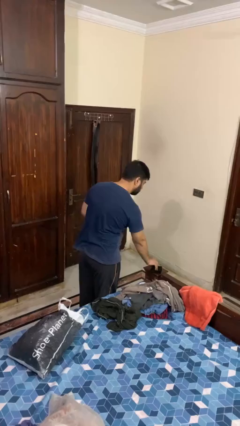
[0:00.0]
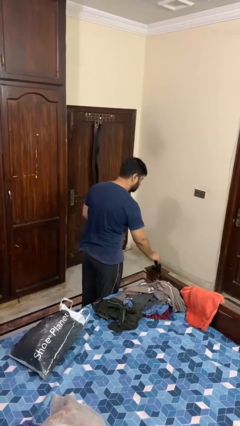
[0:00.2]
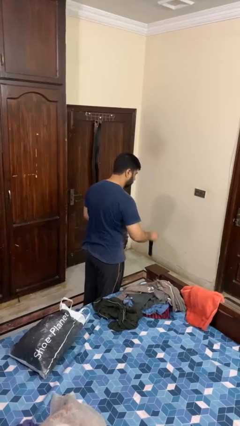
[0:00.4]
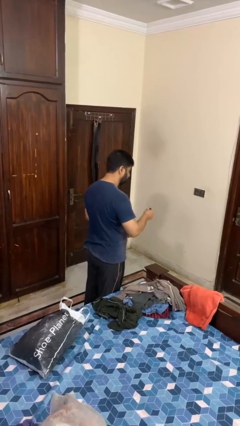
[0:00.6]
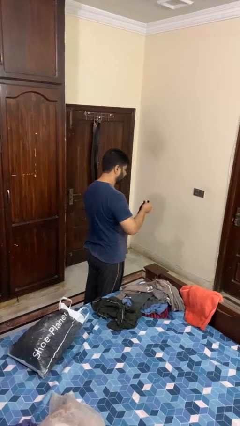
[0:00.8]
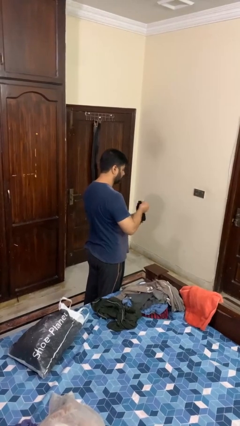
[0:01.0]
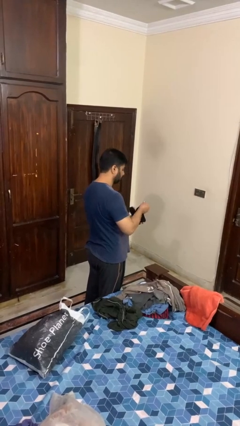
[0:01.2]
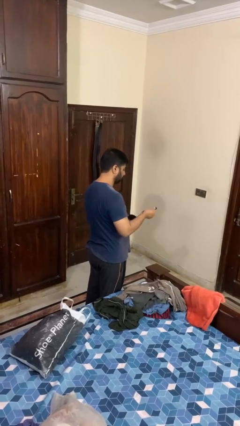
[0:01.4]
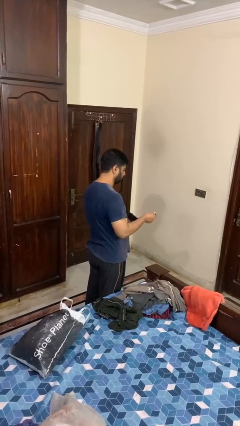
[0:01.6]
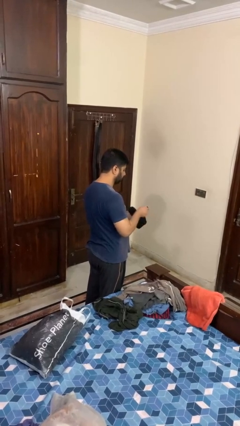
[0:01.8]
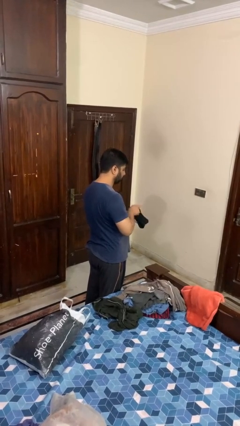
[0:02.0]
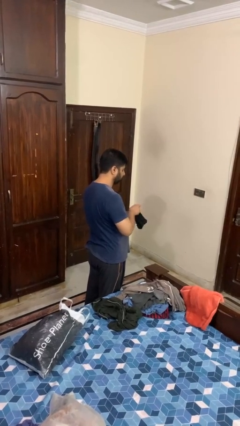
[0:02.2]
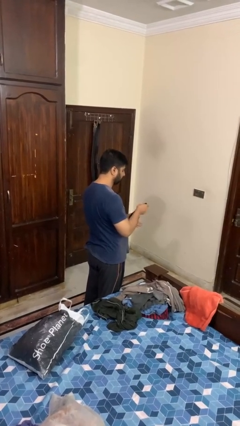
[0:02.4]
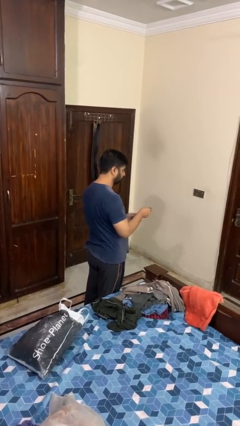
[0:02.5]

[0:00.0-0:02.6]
person folds socks

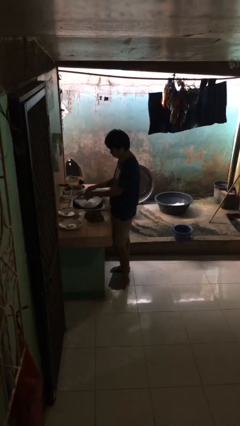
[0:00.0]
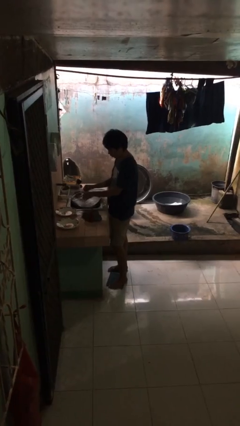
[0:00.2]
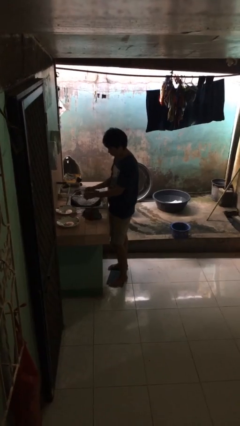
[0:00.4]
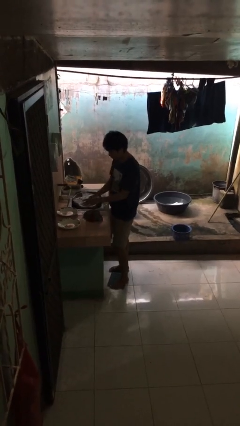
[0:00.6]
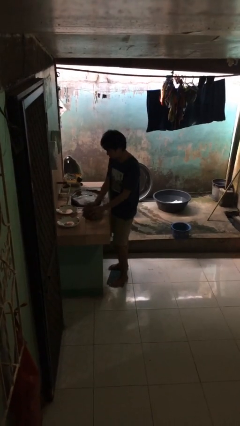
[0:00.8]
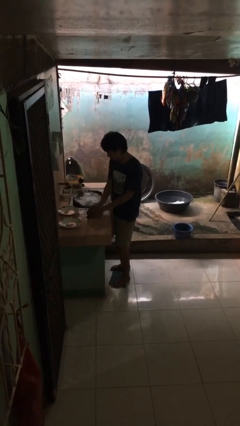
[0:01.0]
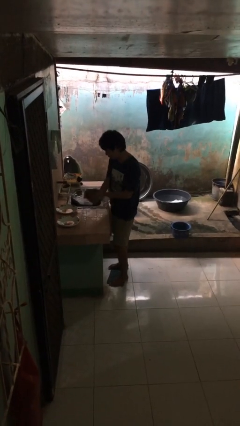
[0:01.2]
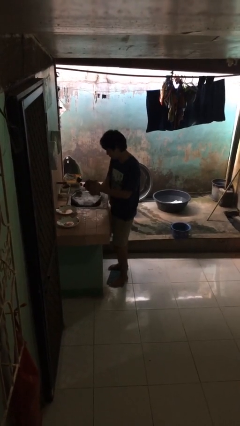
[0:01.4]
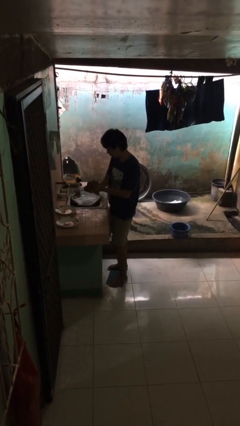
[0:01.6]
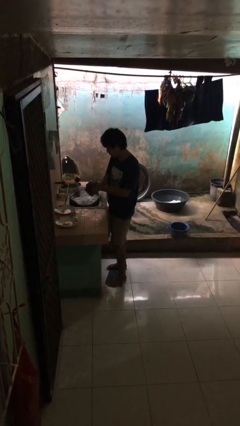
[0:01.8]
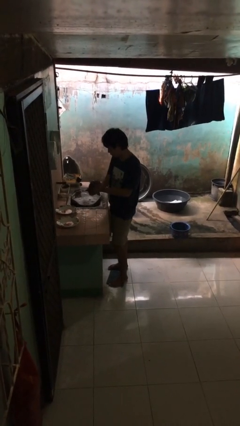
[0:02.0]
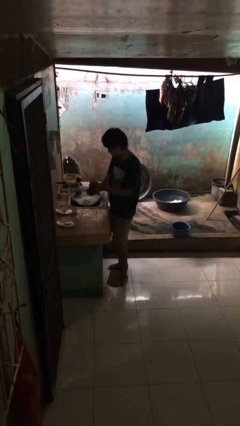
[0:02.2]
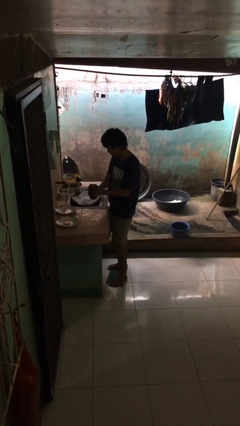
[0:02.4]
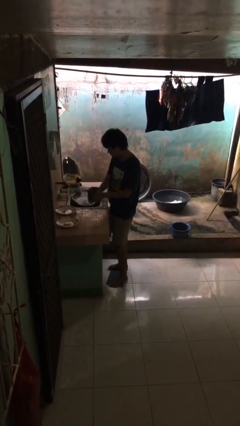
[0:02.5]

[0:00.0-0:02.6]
person dries hands with towel

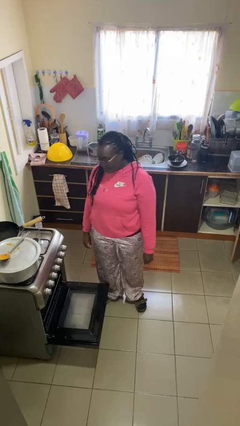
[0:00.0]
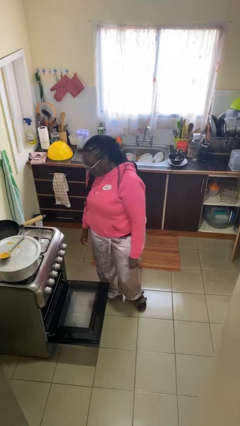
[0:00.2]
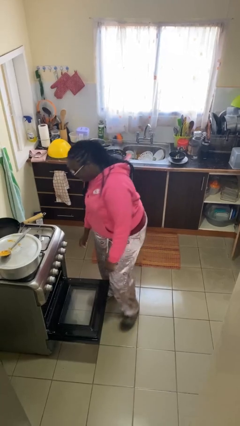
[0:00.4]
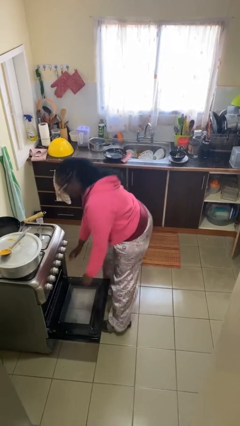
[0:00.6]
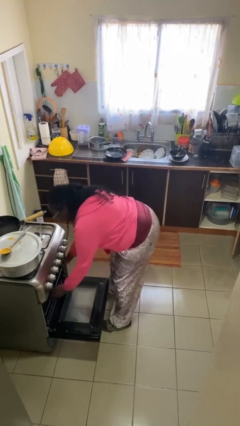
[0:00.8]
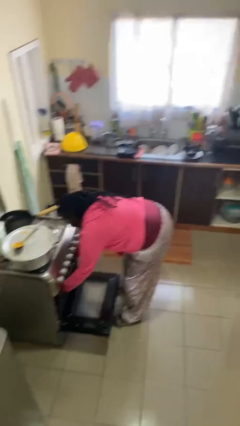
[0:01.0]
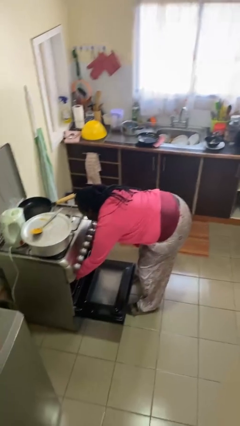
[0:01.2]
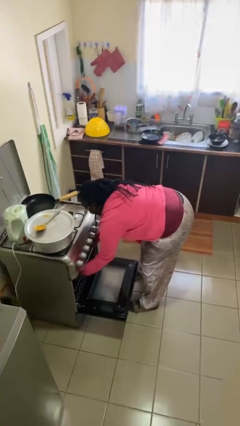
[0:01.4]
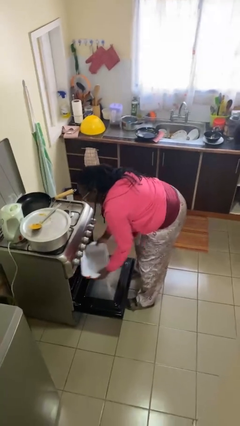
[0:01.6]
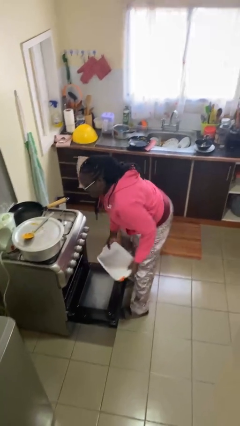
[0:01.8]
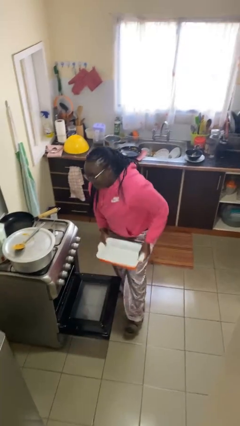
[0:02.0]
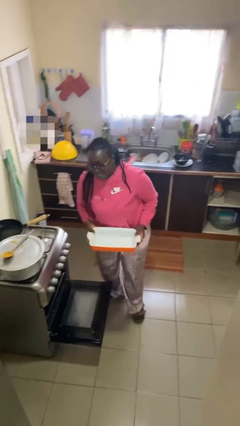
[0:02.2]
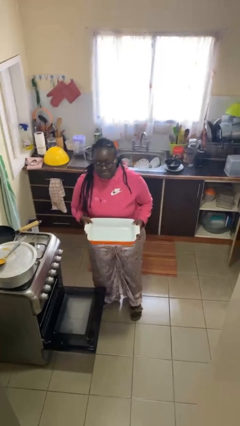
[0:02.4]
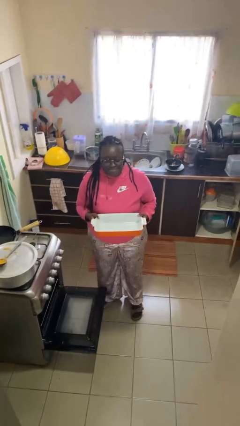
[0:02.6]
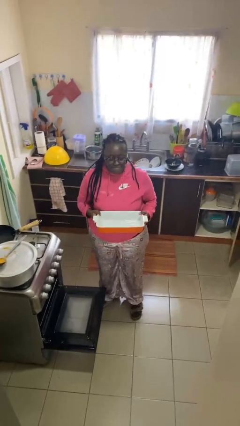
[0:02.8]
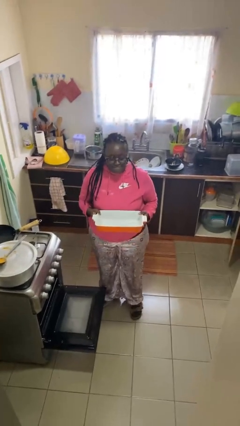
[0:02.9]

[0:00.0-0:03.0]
person takes object from oven

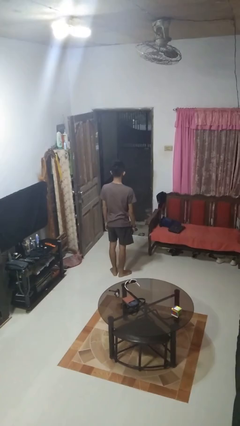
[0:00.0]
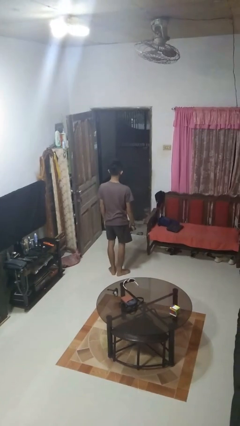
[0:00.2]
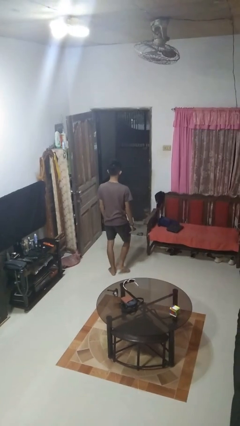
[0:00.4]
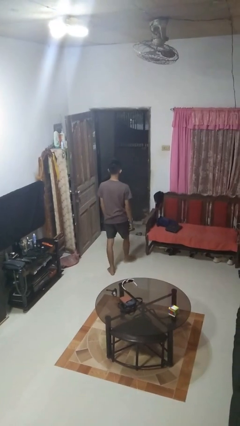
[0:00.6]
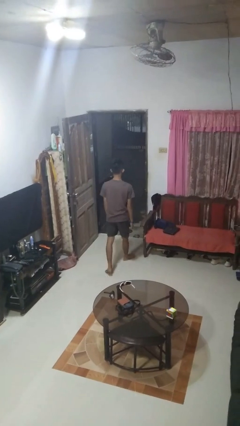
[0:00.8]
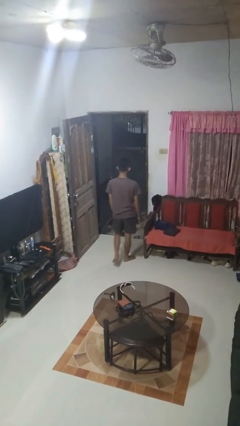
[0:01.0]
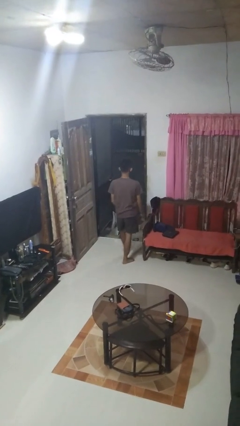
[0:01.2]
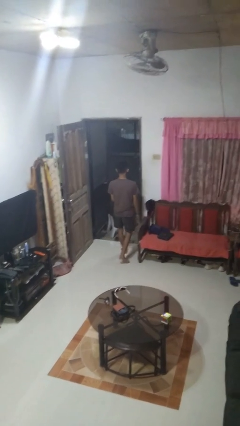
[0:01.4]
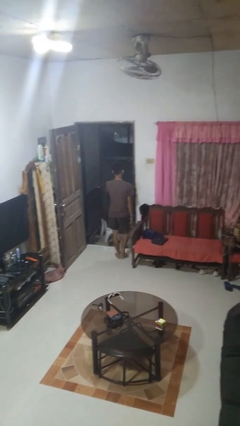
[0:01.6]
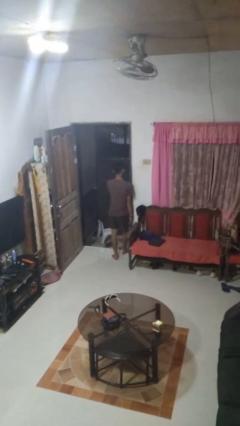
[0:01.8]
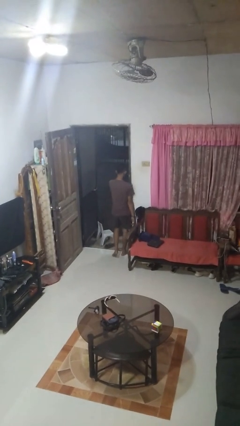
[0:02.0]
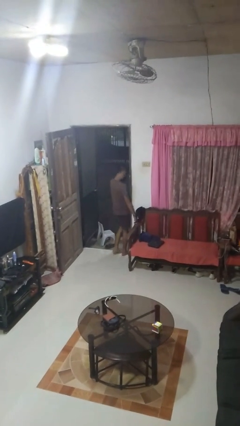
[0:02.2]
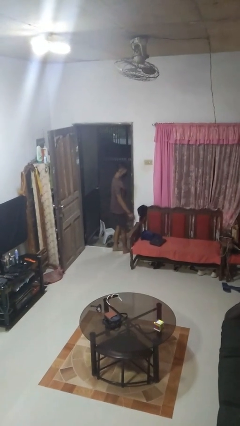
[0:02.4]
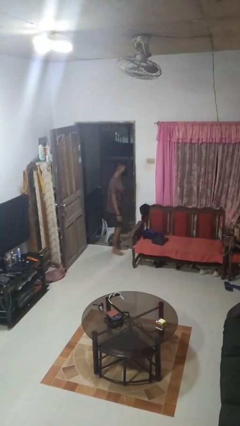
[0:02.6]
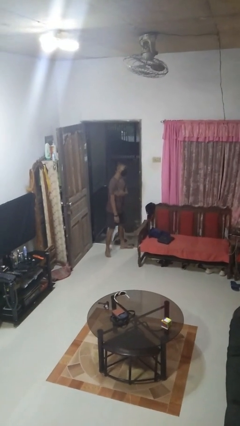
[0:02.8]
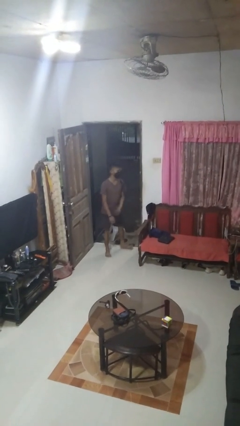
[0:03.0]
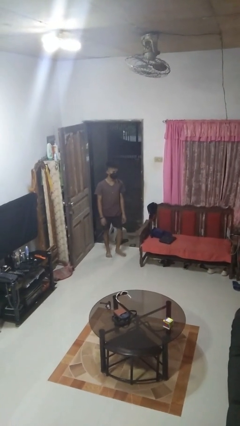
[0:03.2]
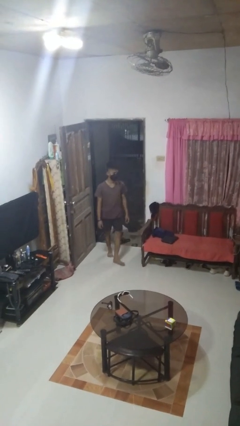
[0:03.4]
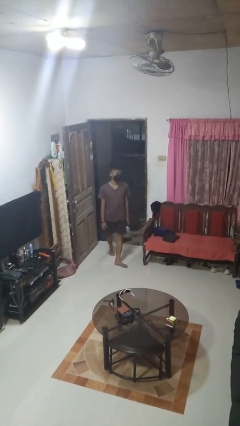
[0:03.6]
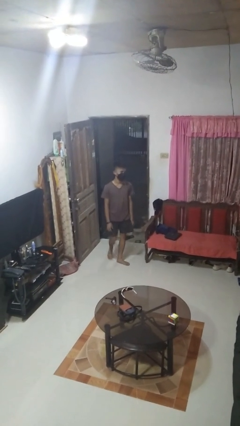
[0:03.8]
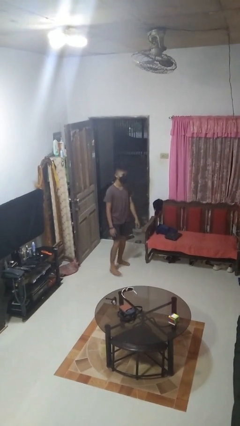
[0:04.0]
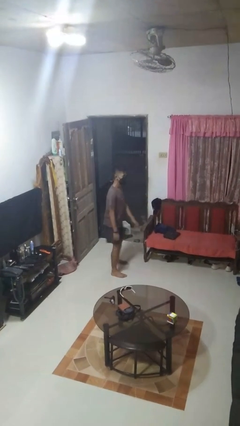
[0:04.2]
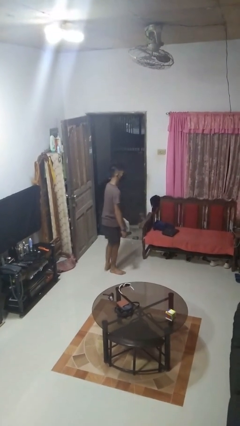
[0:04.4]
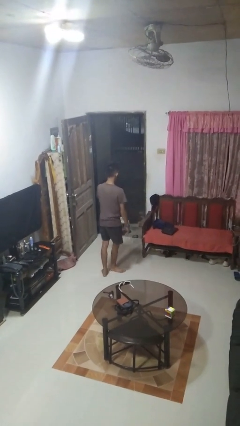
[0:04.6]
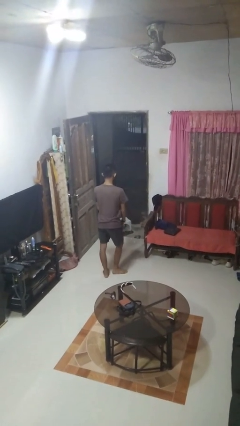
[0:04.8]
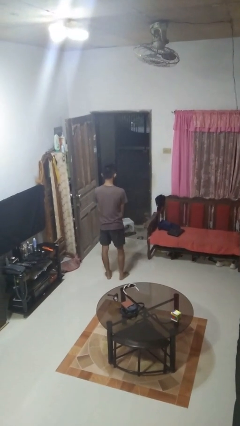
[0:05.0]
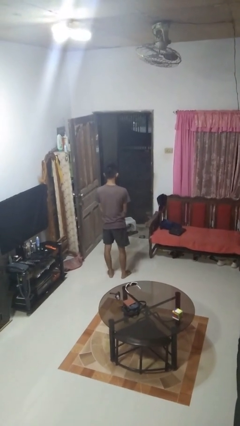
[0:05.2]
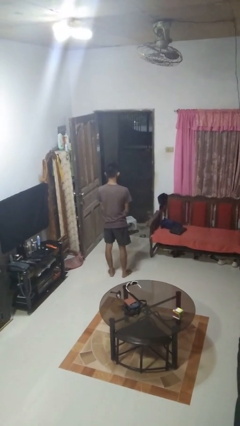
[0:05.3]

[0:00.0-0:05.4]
person bumps into wall

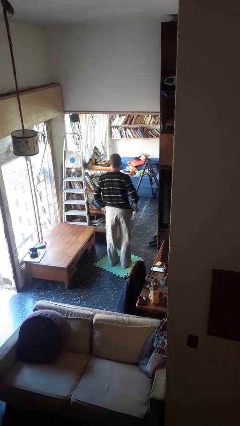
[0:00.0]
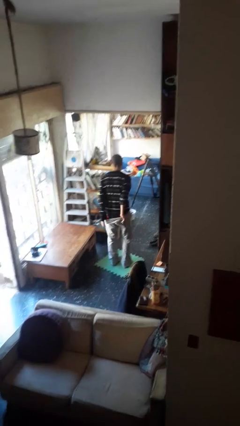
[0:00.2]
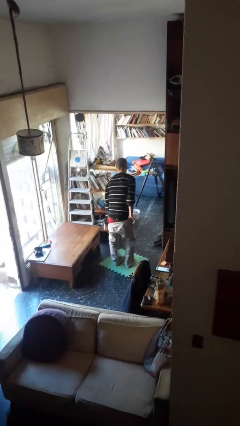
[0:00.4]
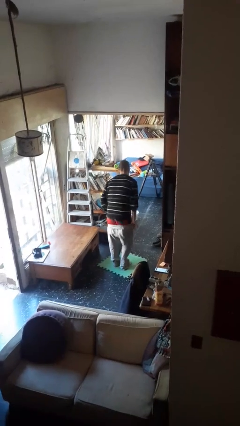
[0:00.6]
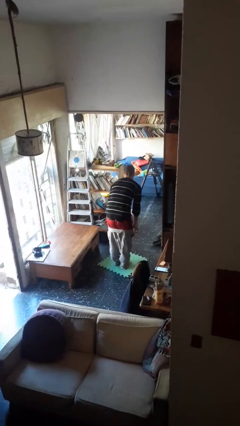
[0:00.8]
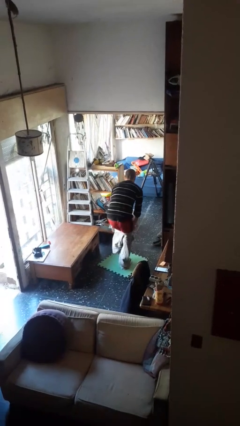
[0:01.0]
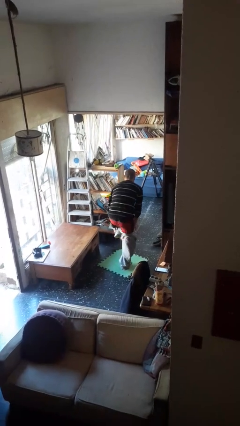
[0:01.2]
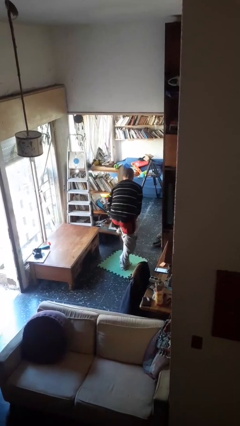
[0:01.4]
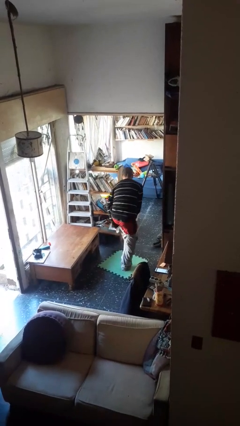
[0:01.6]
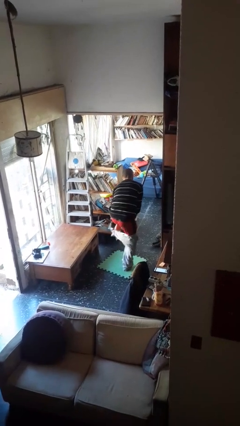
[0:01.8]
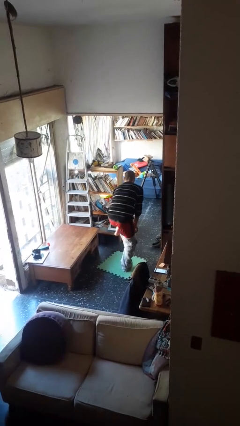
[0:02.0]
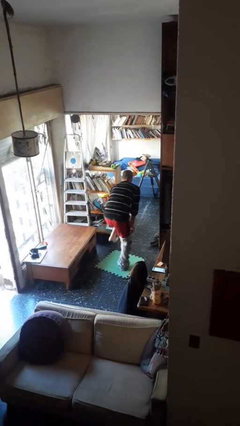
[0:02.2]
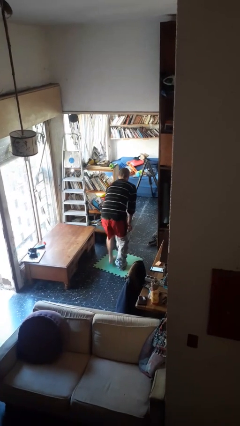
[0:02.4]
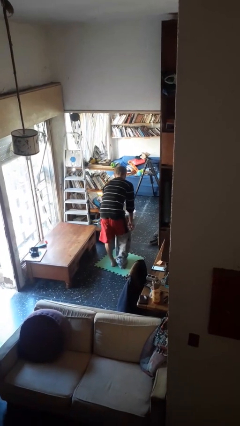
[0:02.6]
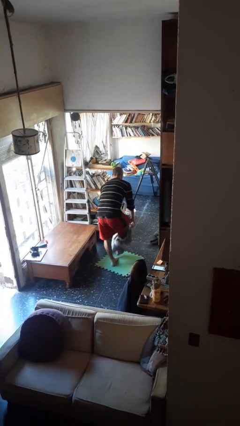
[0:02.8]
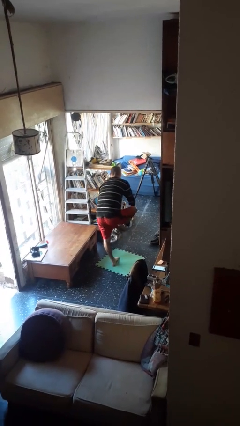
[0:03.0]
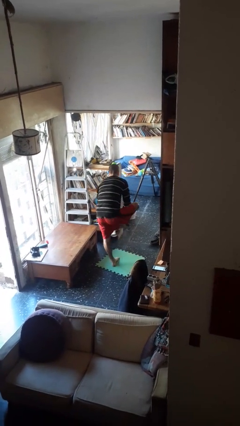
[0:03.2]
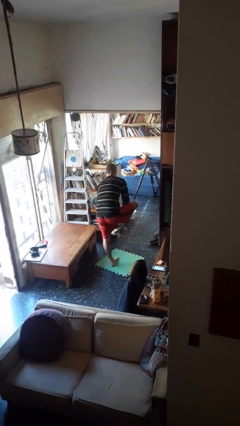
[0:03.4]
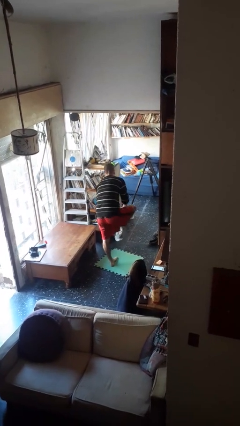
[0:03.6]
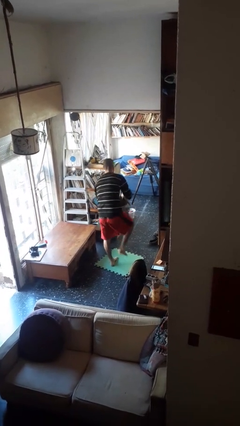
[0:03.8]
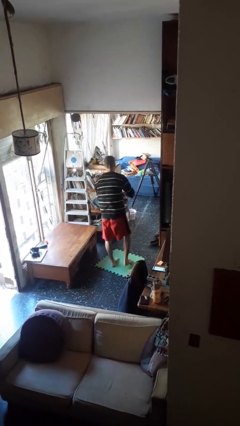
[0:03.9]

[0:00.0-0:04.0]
person takes off pants
